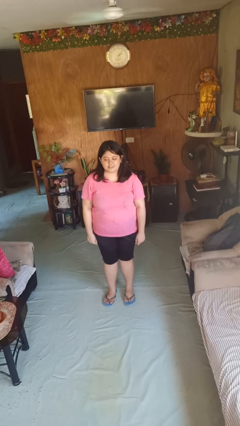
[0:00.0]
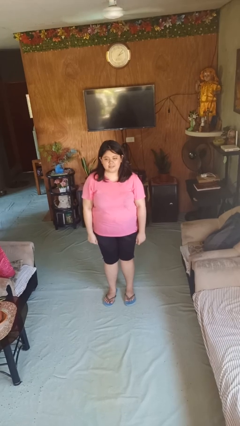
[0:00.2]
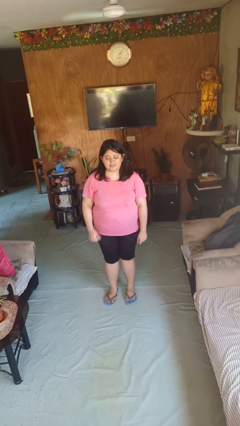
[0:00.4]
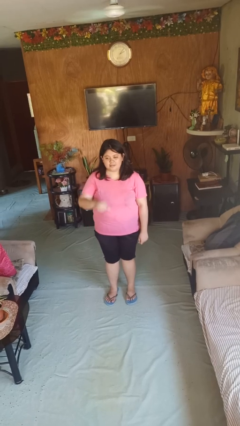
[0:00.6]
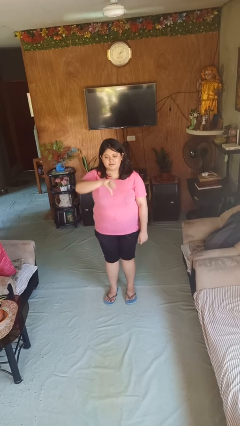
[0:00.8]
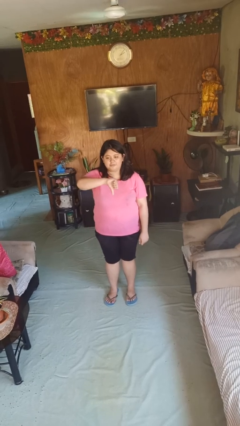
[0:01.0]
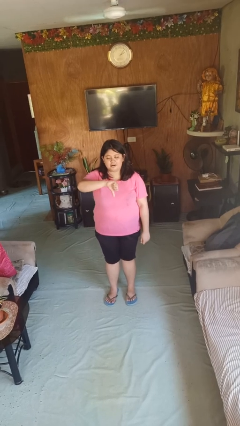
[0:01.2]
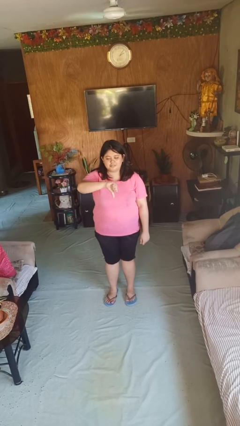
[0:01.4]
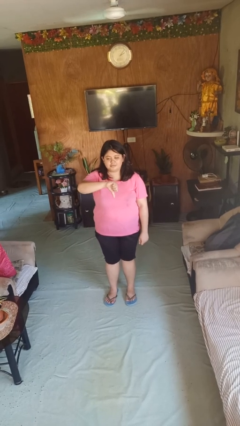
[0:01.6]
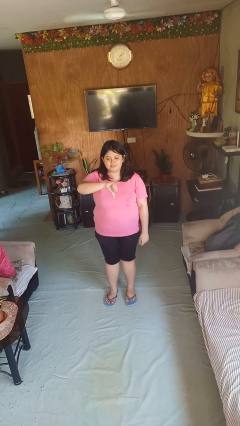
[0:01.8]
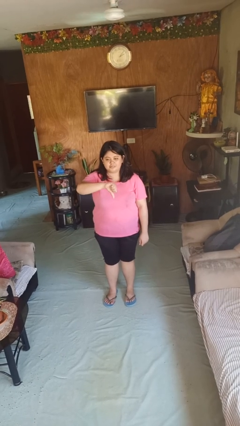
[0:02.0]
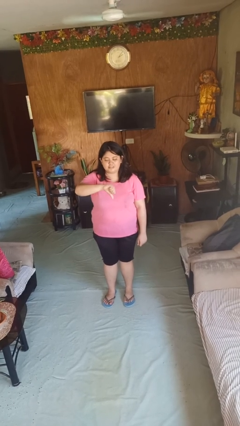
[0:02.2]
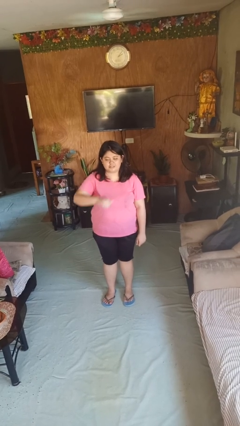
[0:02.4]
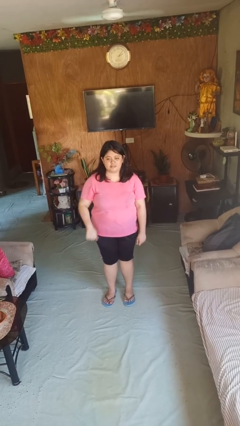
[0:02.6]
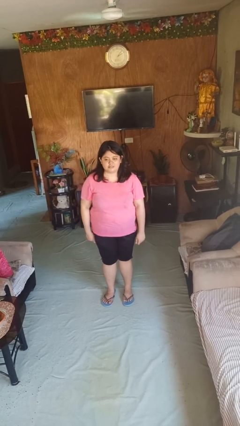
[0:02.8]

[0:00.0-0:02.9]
person gestures thumbs down

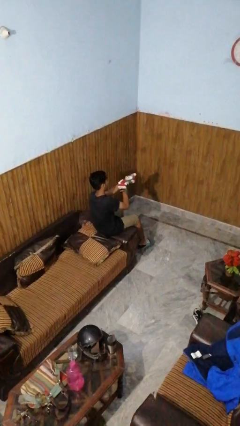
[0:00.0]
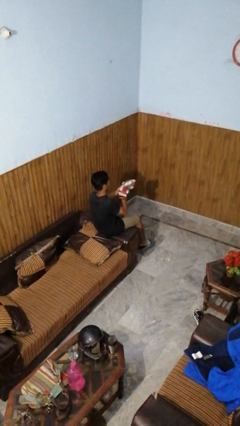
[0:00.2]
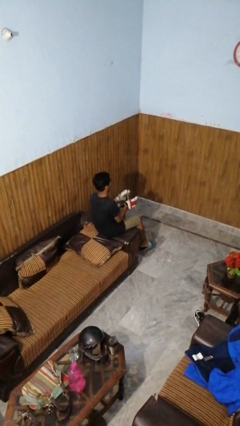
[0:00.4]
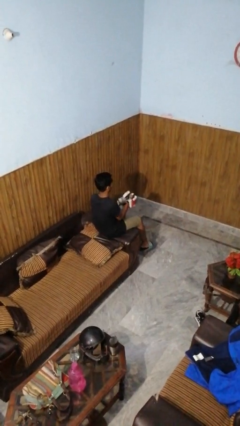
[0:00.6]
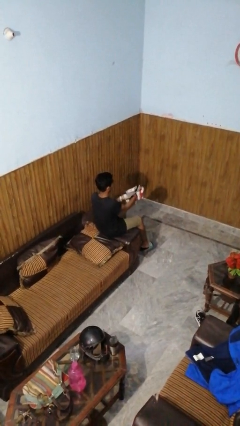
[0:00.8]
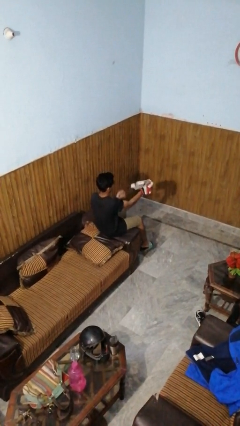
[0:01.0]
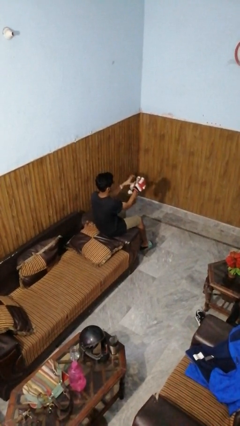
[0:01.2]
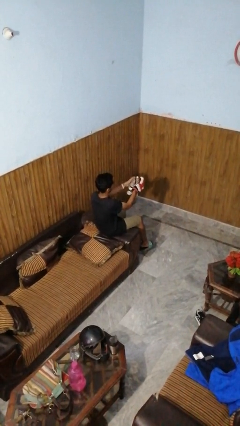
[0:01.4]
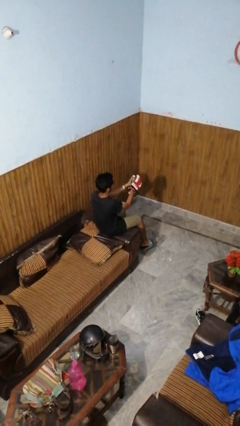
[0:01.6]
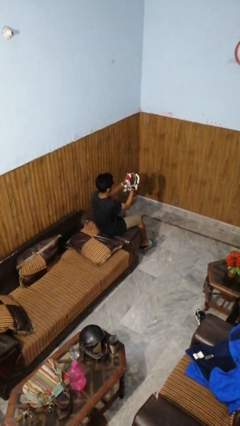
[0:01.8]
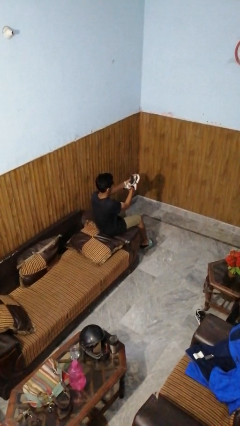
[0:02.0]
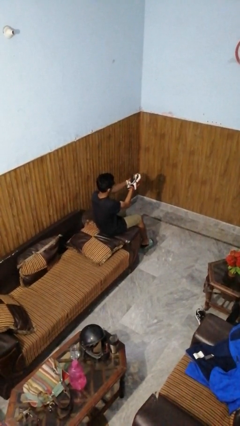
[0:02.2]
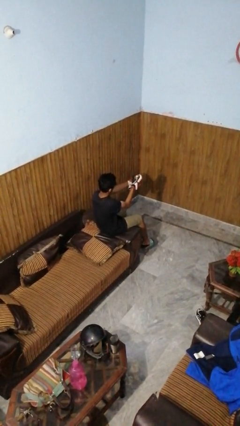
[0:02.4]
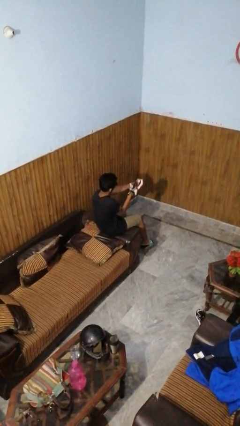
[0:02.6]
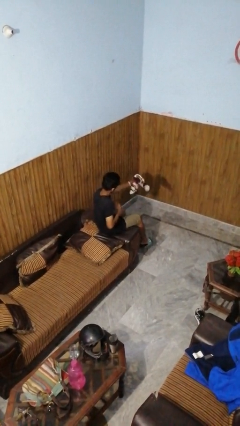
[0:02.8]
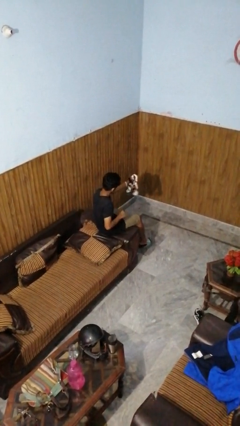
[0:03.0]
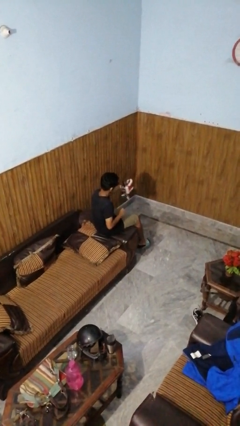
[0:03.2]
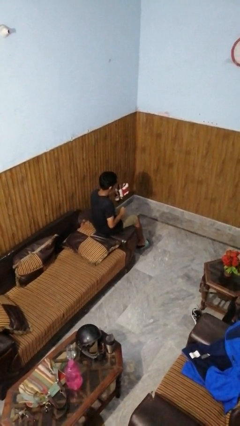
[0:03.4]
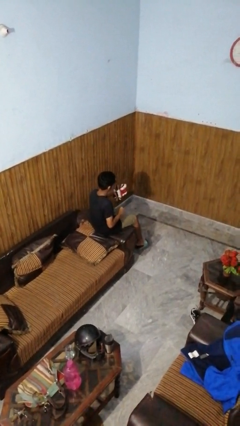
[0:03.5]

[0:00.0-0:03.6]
person takes off gloves

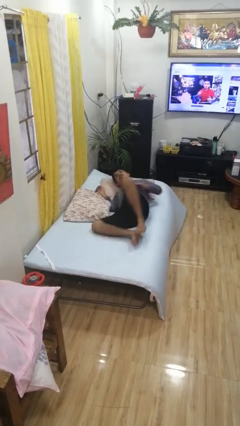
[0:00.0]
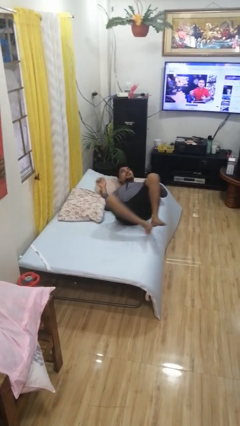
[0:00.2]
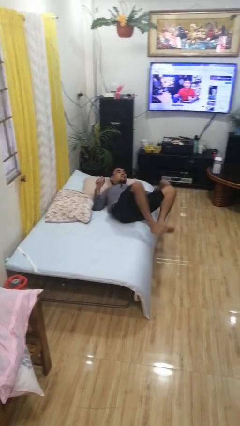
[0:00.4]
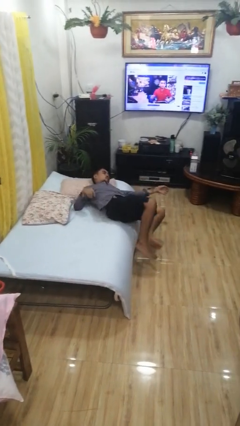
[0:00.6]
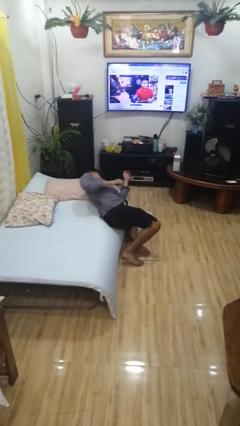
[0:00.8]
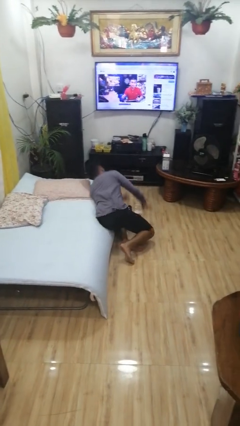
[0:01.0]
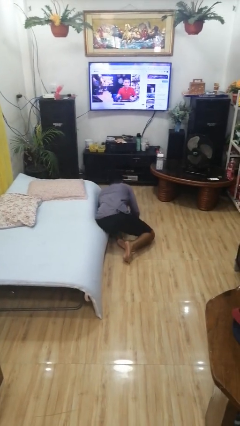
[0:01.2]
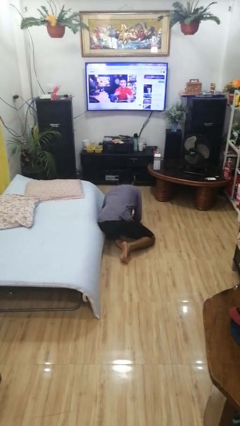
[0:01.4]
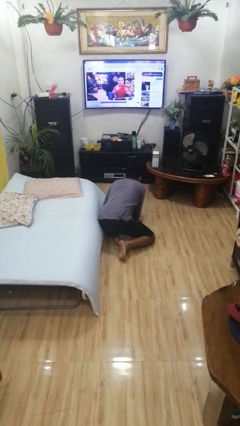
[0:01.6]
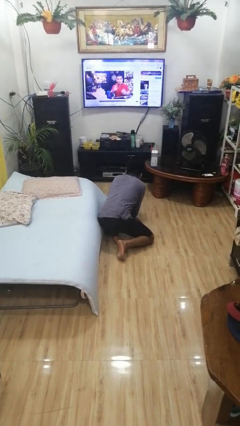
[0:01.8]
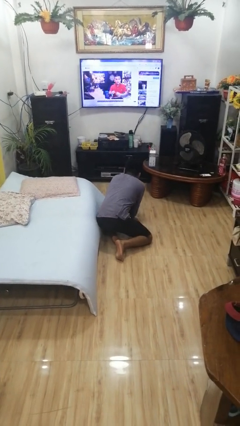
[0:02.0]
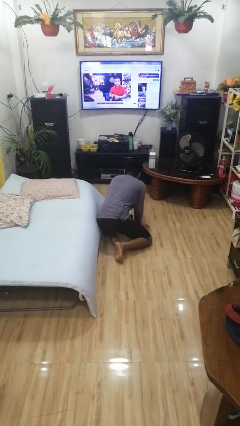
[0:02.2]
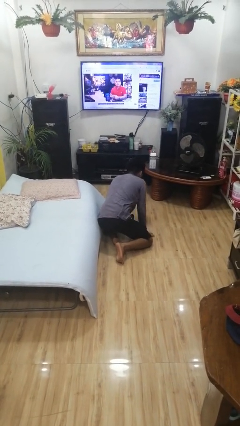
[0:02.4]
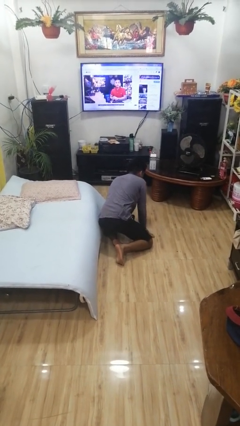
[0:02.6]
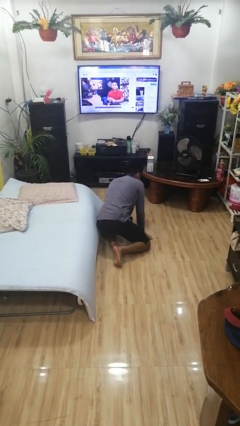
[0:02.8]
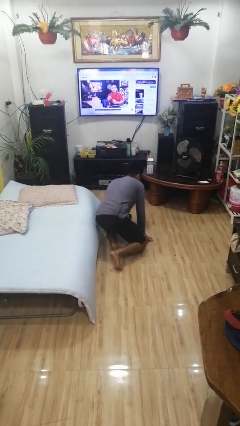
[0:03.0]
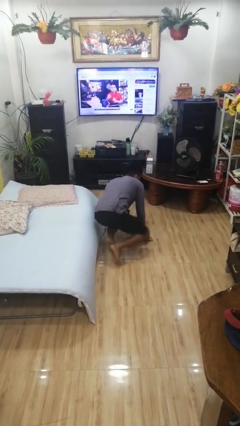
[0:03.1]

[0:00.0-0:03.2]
person falls from bed

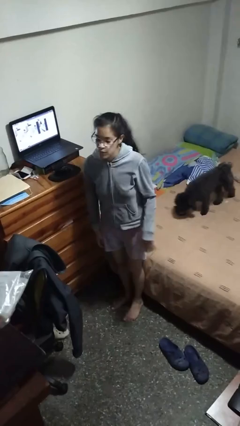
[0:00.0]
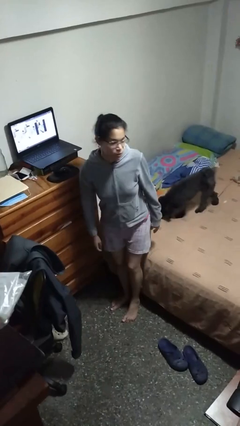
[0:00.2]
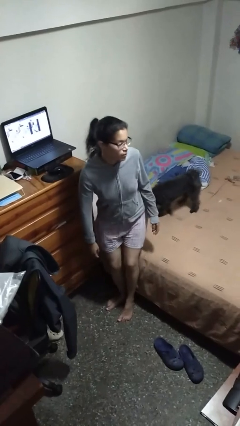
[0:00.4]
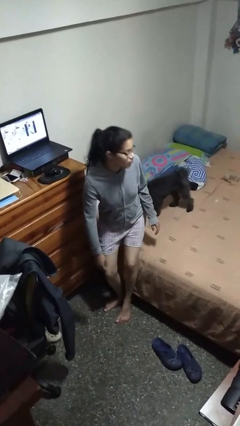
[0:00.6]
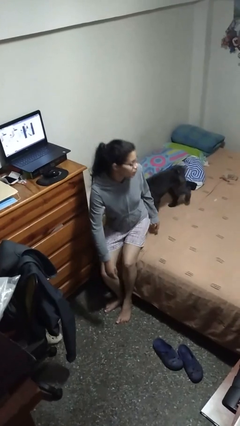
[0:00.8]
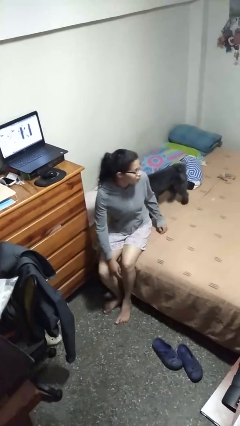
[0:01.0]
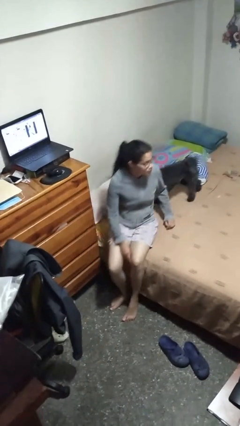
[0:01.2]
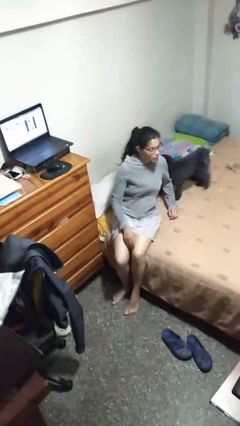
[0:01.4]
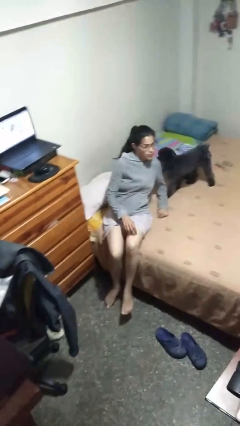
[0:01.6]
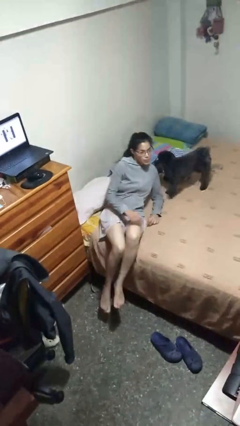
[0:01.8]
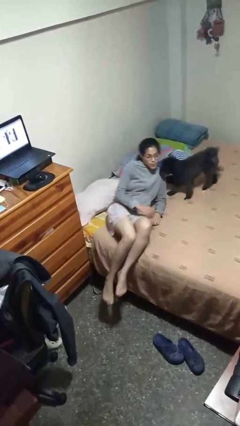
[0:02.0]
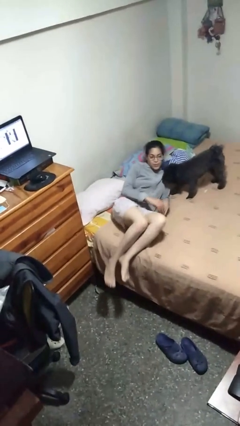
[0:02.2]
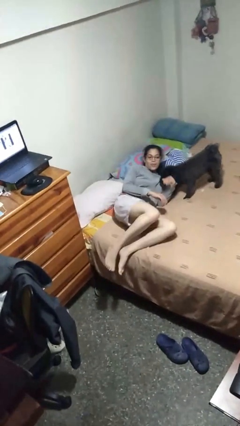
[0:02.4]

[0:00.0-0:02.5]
person lies down on bed

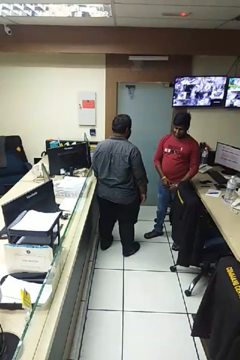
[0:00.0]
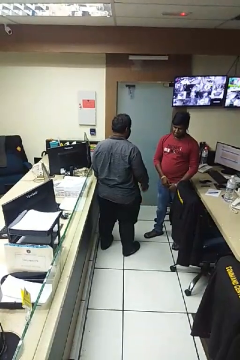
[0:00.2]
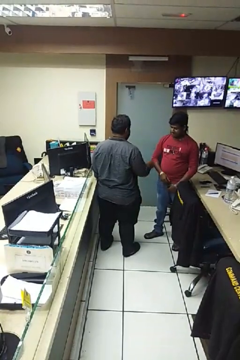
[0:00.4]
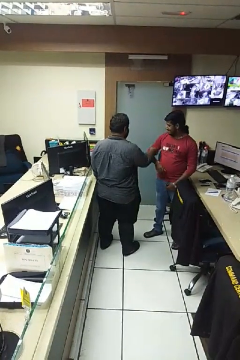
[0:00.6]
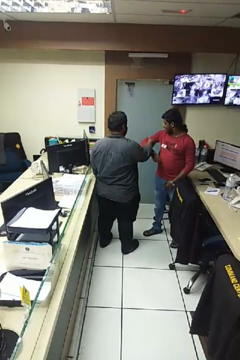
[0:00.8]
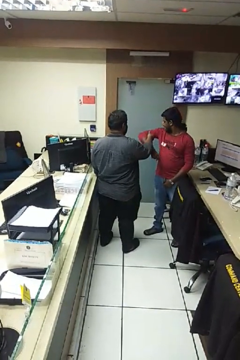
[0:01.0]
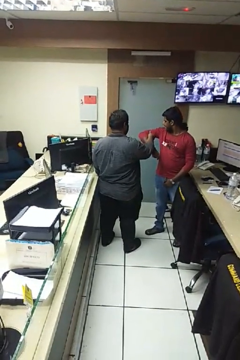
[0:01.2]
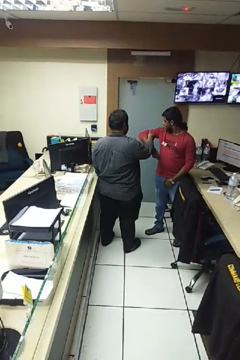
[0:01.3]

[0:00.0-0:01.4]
person grabs person by bicep

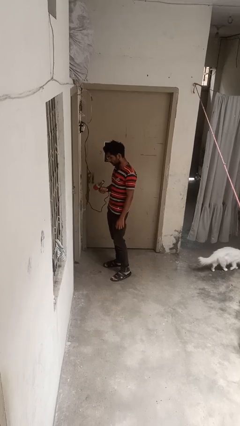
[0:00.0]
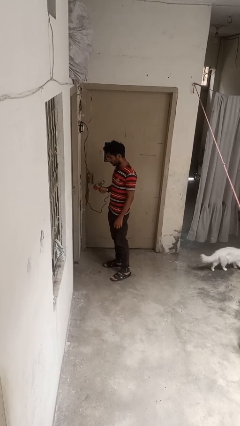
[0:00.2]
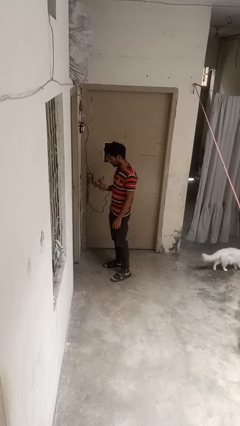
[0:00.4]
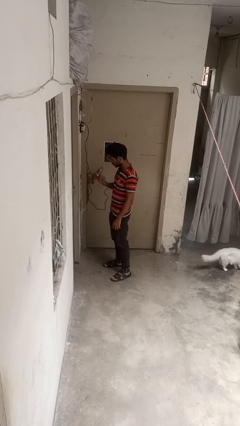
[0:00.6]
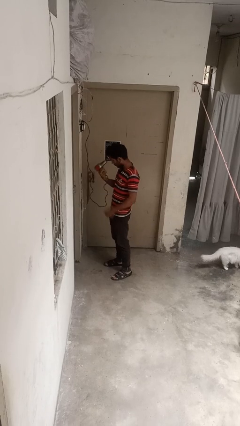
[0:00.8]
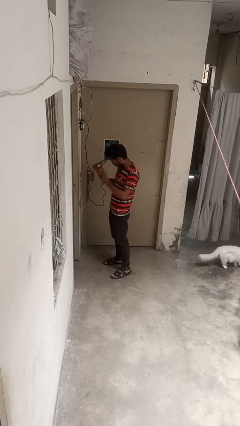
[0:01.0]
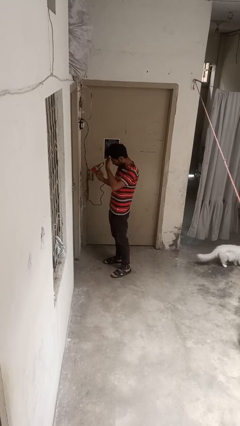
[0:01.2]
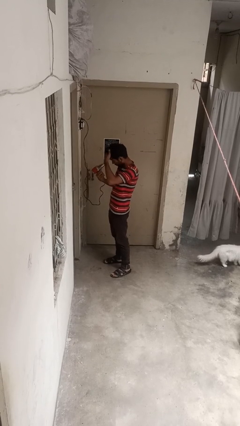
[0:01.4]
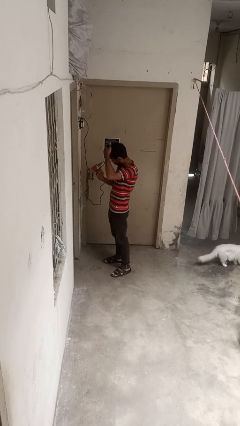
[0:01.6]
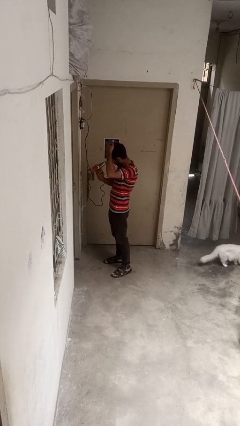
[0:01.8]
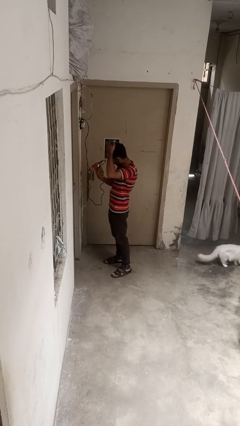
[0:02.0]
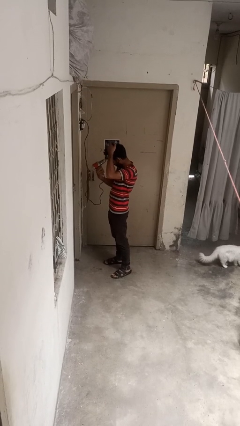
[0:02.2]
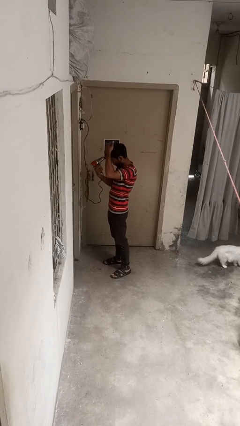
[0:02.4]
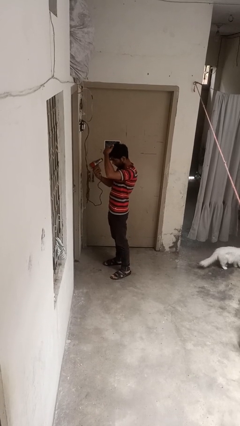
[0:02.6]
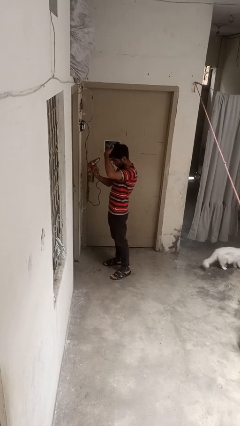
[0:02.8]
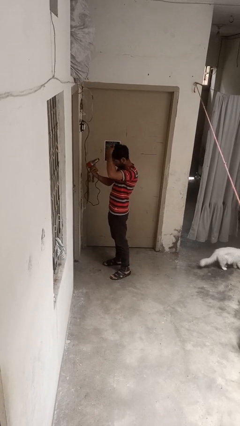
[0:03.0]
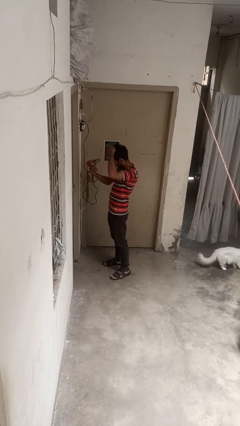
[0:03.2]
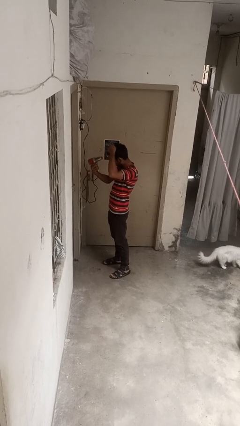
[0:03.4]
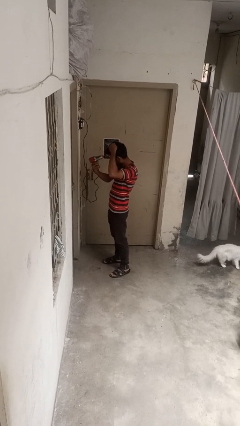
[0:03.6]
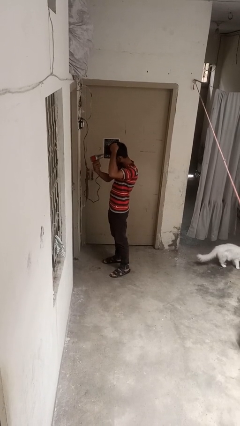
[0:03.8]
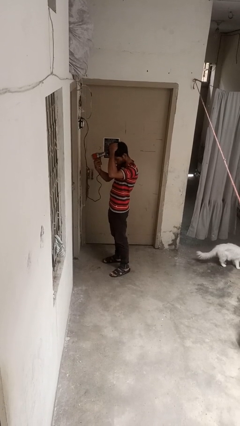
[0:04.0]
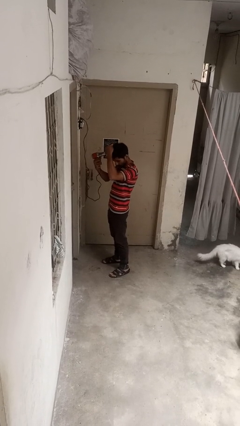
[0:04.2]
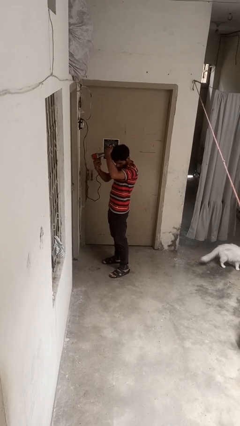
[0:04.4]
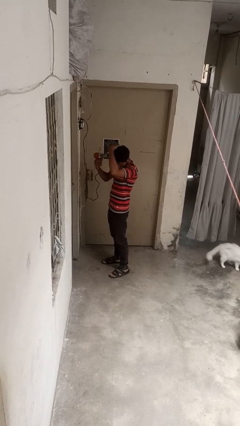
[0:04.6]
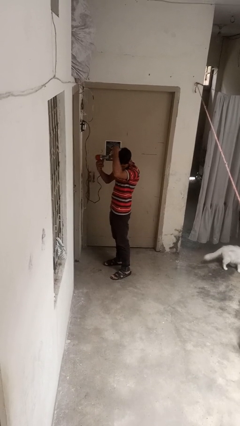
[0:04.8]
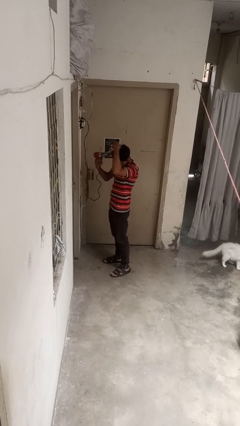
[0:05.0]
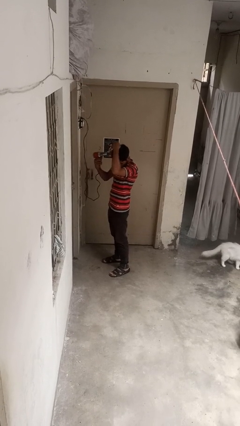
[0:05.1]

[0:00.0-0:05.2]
person dries hair with hairdryer
